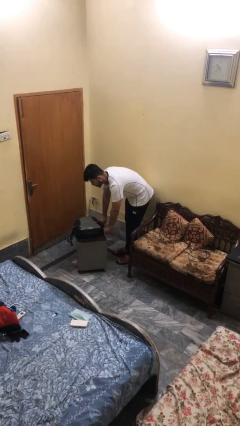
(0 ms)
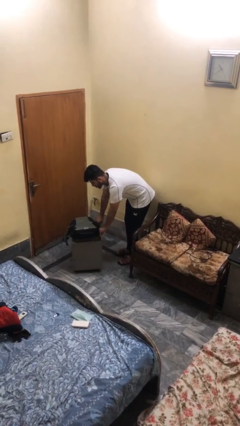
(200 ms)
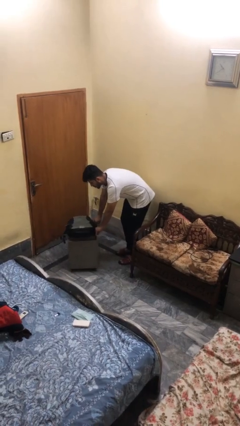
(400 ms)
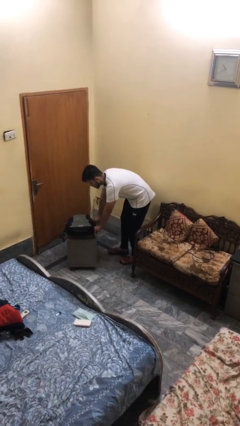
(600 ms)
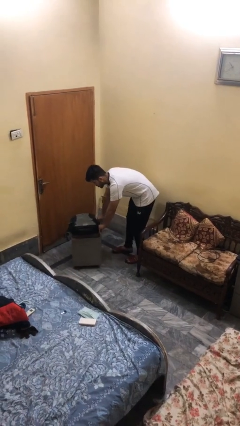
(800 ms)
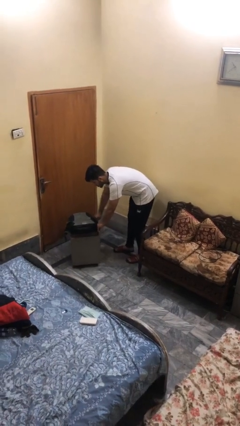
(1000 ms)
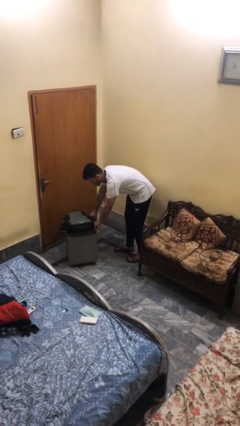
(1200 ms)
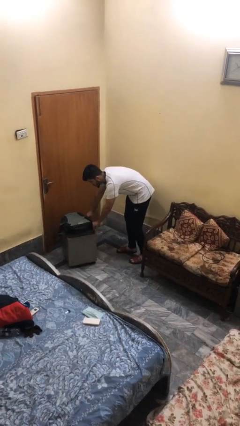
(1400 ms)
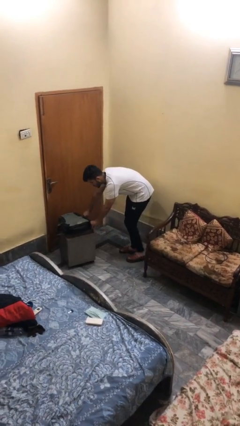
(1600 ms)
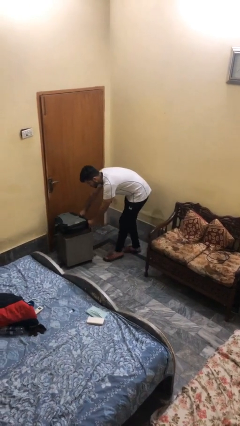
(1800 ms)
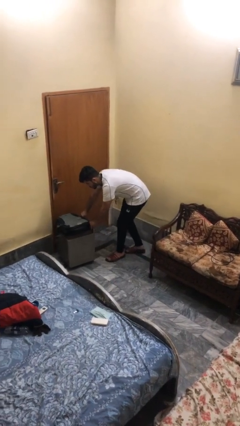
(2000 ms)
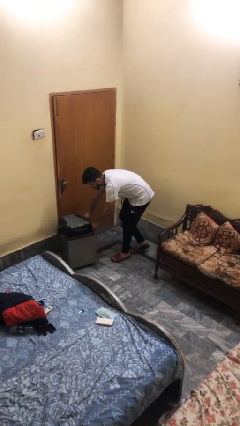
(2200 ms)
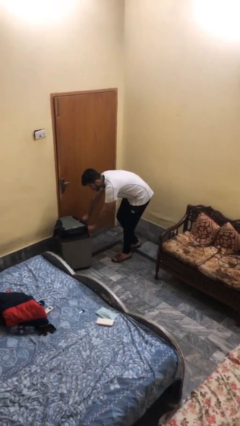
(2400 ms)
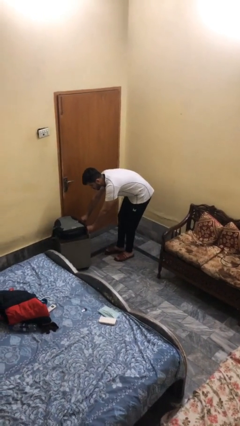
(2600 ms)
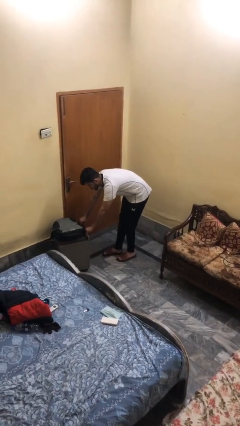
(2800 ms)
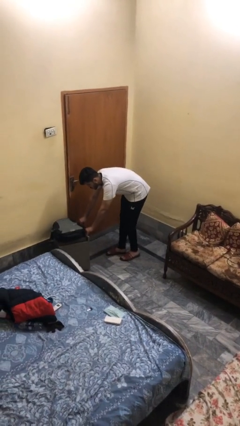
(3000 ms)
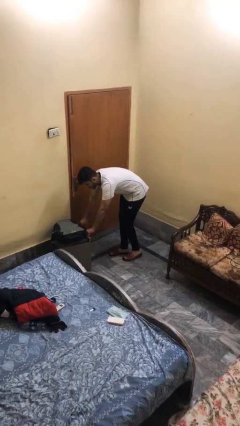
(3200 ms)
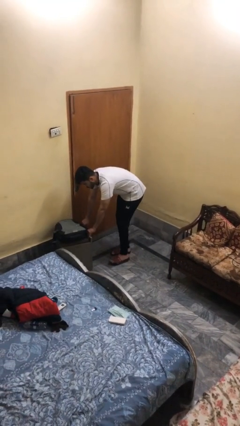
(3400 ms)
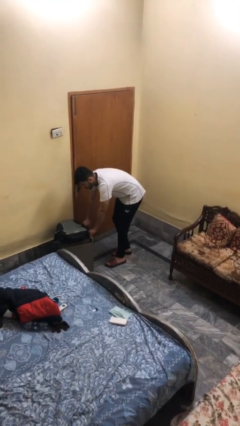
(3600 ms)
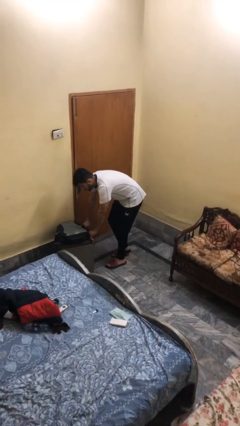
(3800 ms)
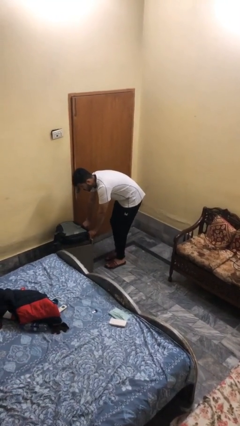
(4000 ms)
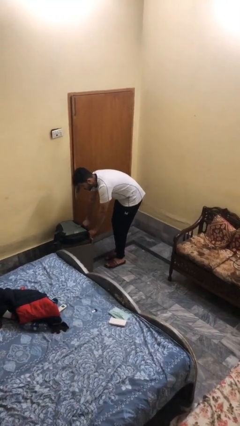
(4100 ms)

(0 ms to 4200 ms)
person pushes wheeled cart

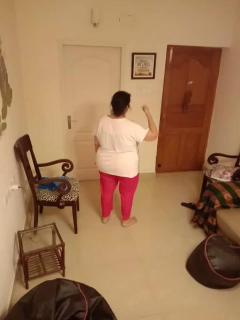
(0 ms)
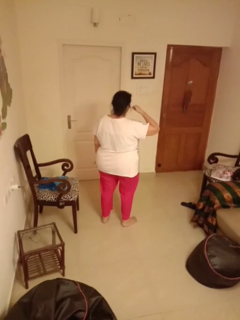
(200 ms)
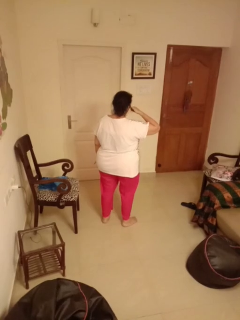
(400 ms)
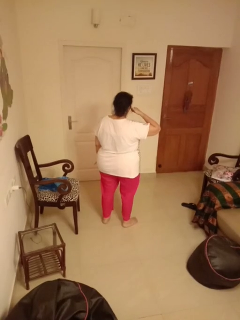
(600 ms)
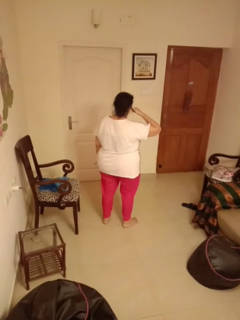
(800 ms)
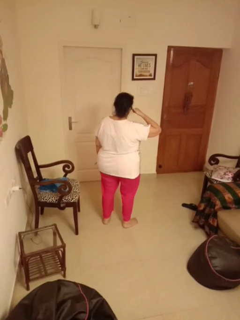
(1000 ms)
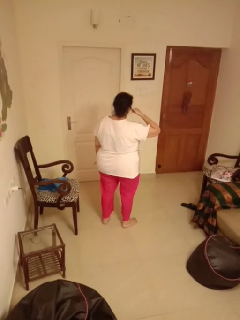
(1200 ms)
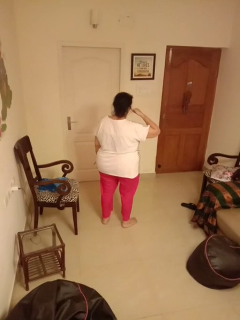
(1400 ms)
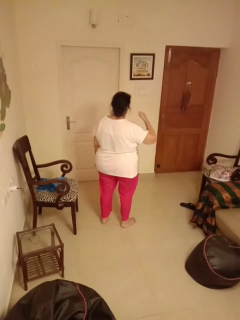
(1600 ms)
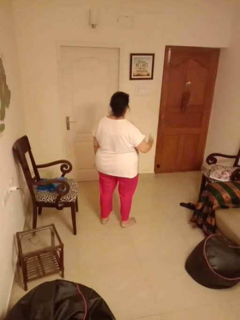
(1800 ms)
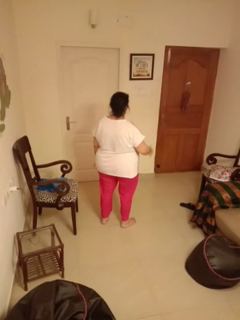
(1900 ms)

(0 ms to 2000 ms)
person gestures call me

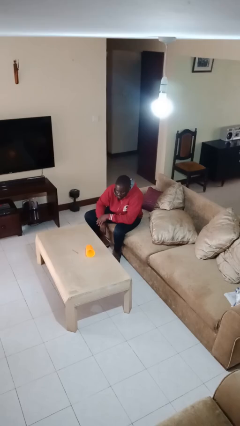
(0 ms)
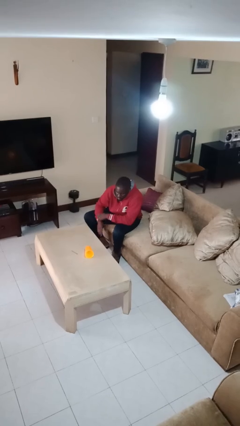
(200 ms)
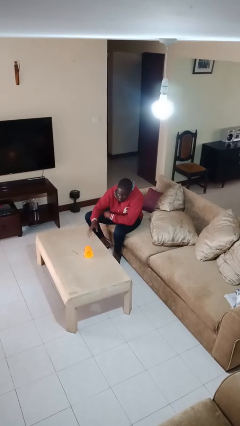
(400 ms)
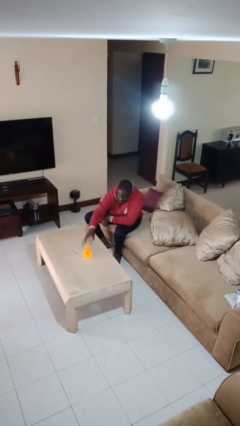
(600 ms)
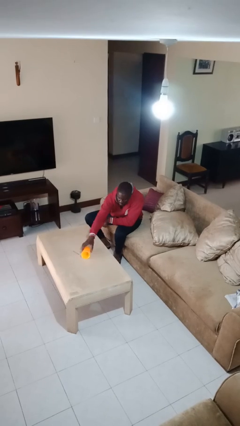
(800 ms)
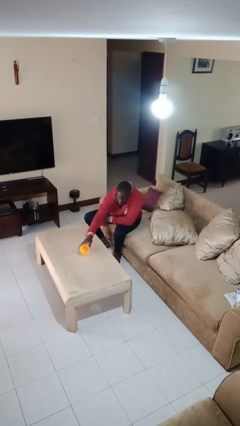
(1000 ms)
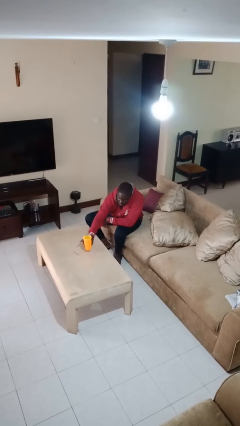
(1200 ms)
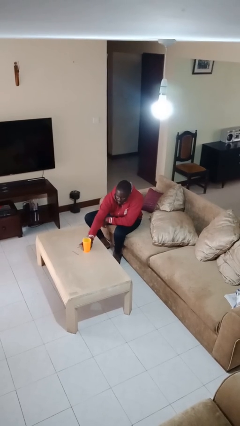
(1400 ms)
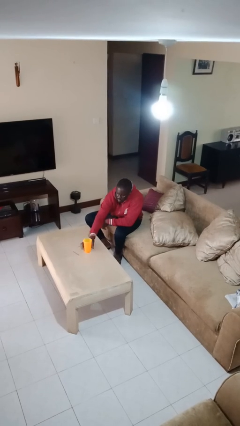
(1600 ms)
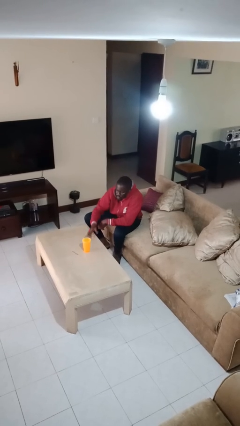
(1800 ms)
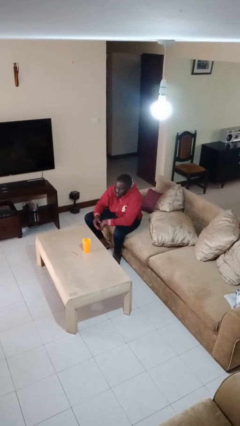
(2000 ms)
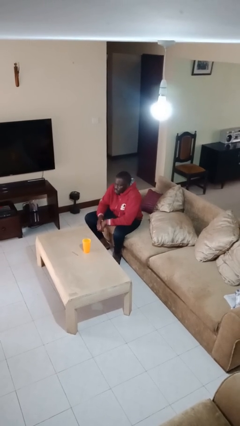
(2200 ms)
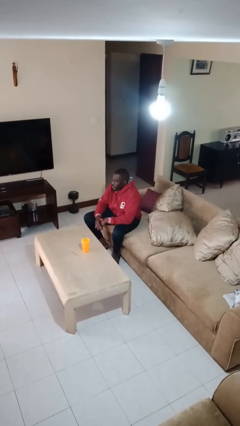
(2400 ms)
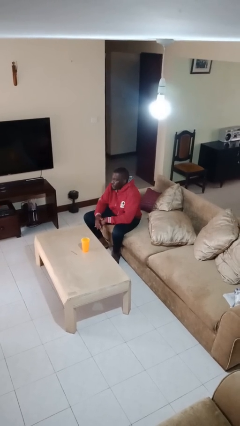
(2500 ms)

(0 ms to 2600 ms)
person sets upright glass

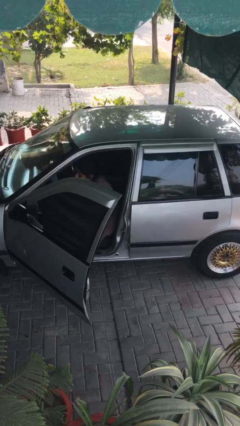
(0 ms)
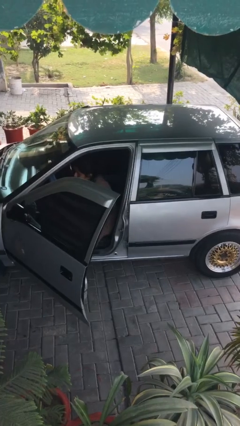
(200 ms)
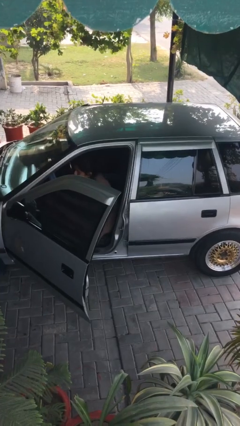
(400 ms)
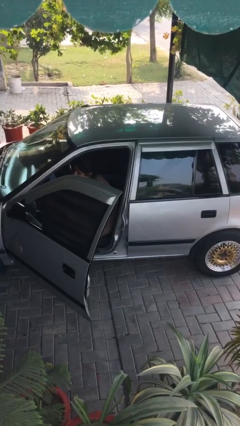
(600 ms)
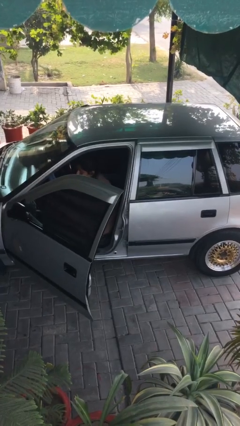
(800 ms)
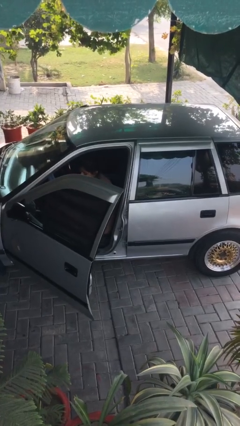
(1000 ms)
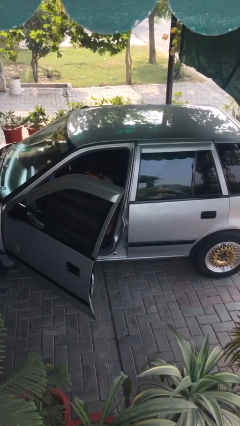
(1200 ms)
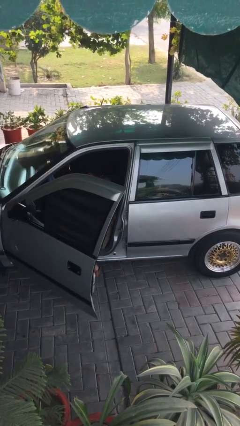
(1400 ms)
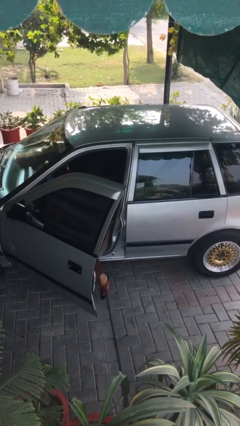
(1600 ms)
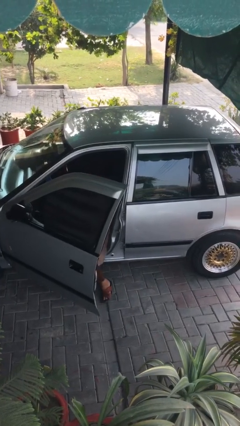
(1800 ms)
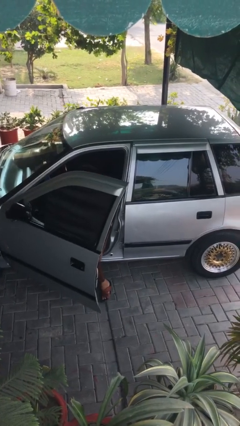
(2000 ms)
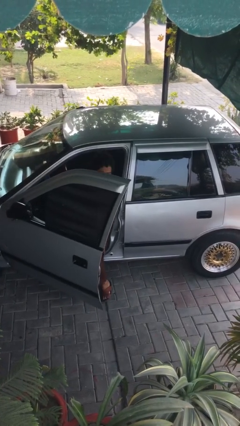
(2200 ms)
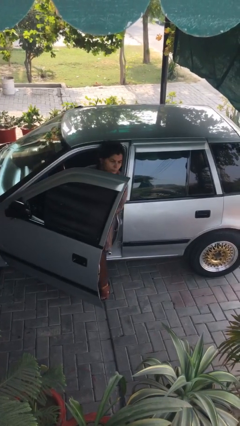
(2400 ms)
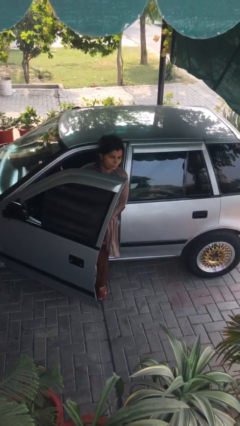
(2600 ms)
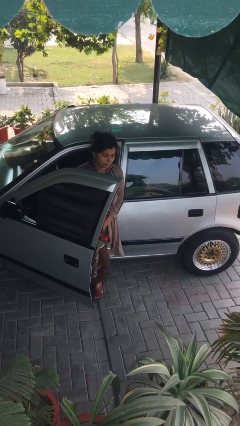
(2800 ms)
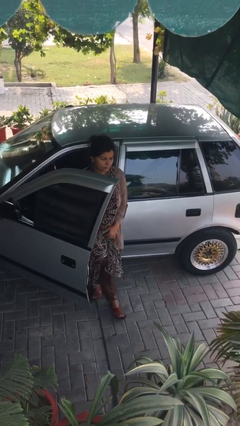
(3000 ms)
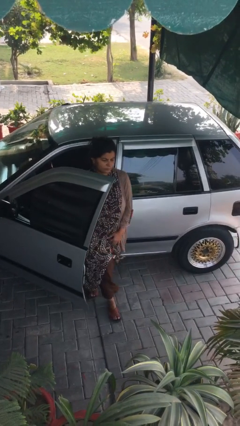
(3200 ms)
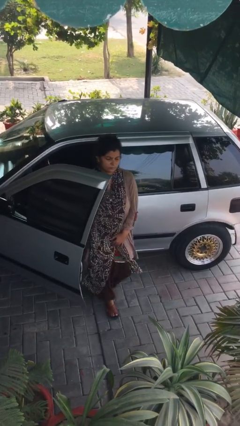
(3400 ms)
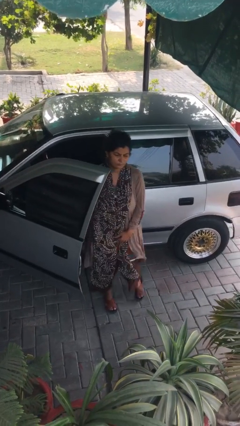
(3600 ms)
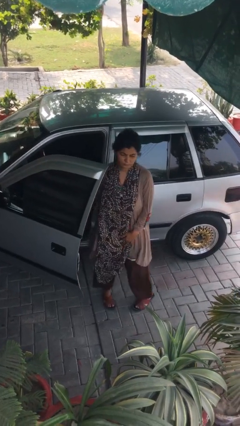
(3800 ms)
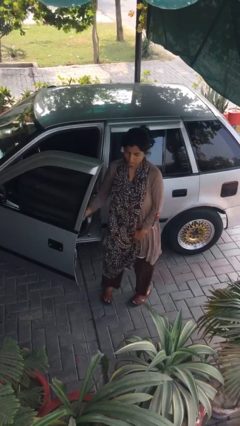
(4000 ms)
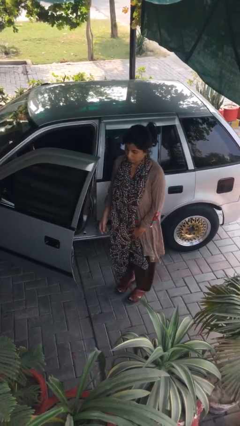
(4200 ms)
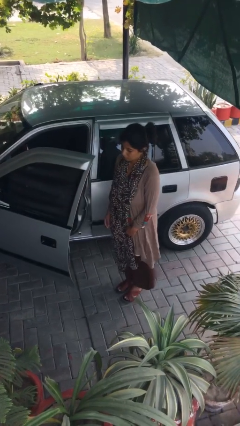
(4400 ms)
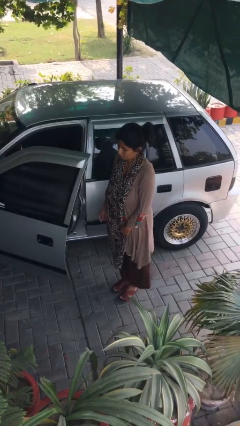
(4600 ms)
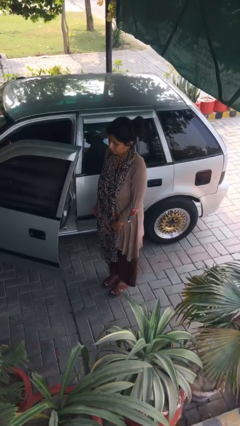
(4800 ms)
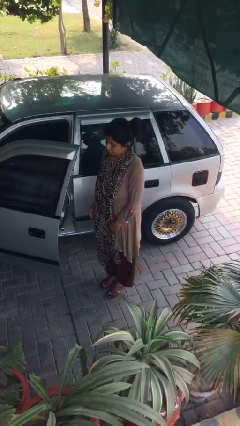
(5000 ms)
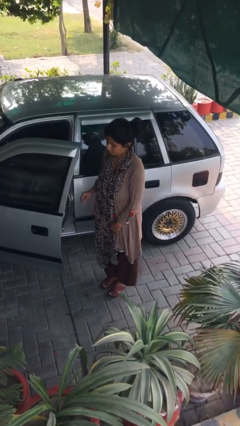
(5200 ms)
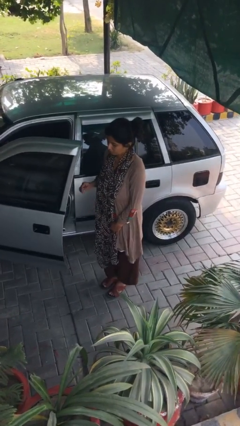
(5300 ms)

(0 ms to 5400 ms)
person exits car

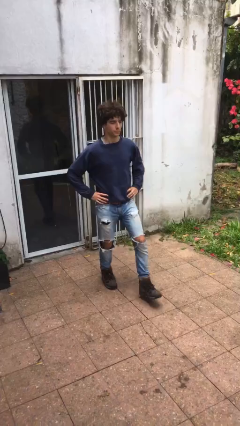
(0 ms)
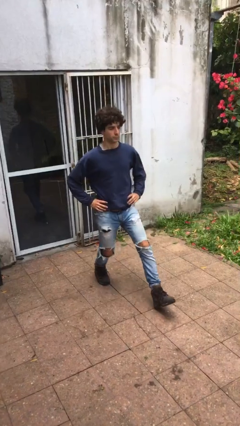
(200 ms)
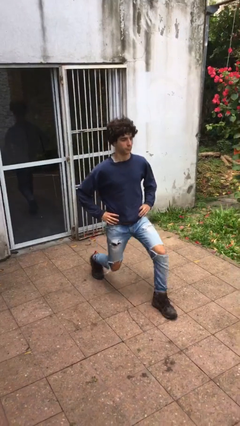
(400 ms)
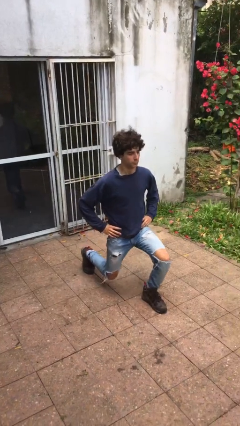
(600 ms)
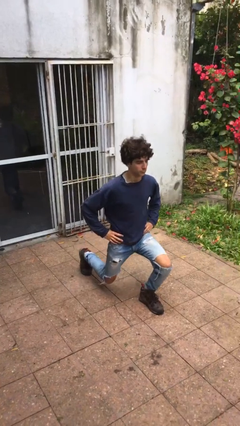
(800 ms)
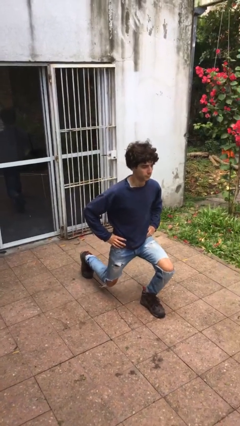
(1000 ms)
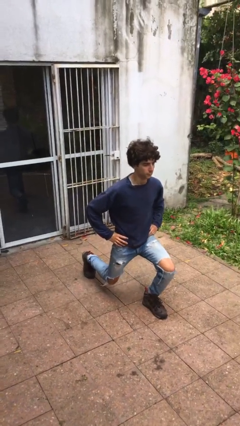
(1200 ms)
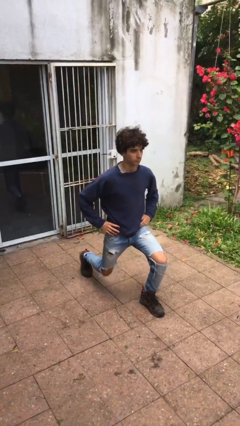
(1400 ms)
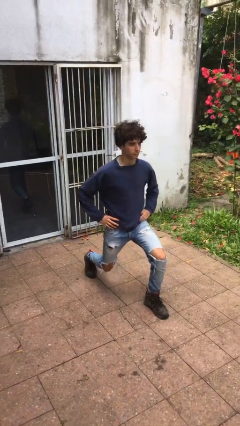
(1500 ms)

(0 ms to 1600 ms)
person exercises with lunges

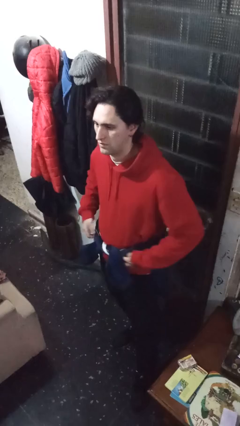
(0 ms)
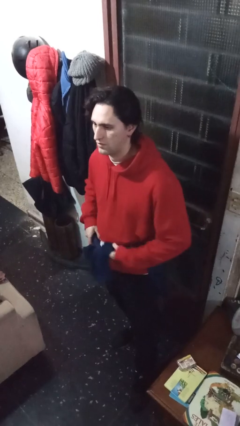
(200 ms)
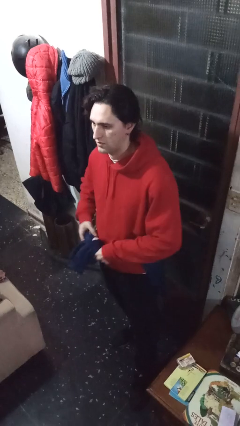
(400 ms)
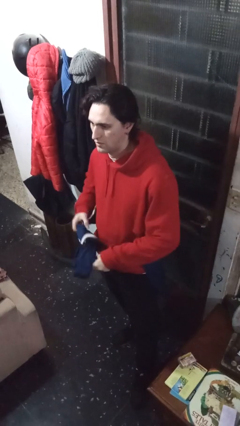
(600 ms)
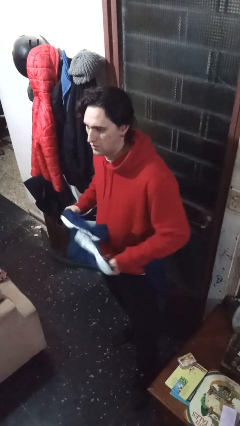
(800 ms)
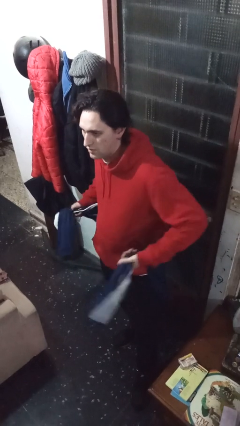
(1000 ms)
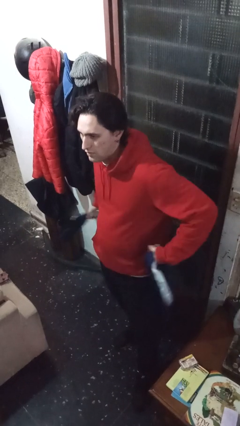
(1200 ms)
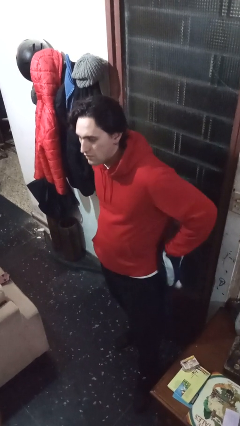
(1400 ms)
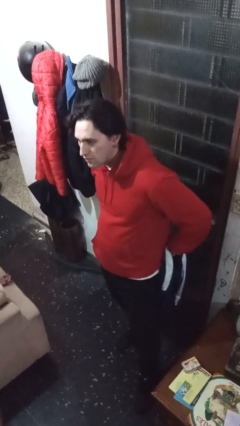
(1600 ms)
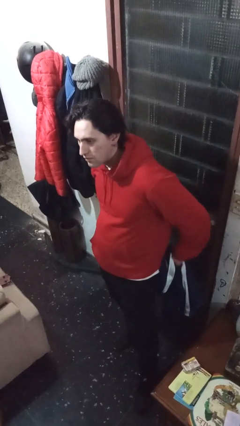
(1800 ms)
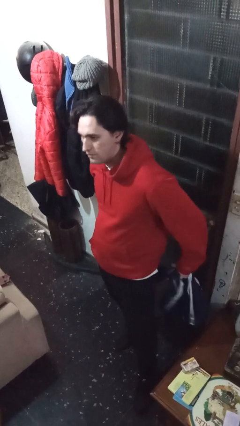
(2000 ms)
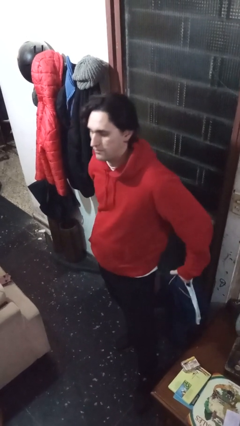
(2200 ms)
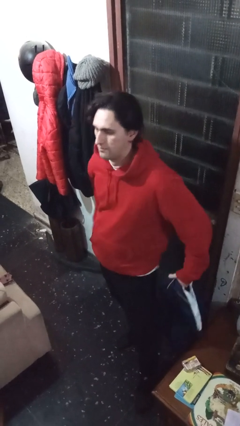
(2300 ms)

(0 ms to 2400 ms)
person unties jacket around waist
